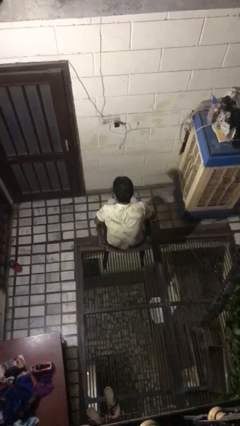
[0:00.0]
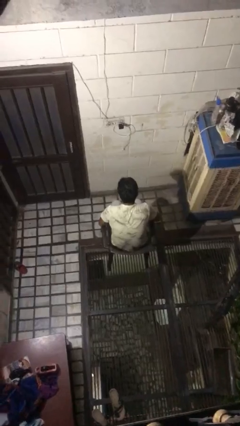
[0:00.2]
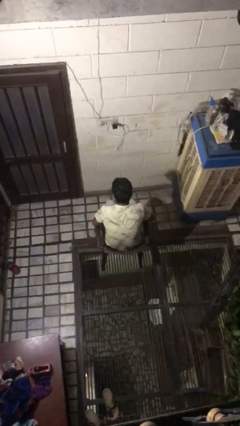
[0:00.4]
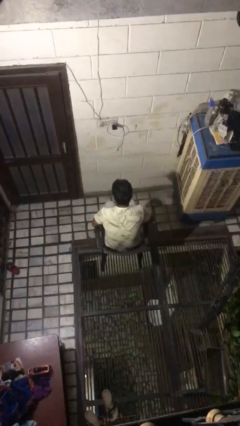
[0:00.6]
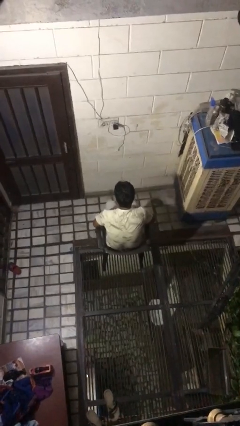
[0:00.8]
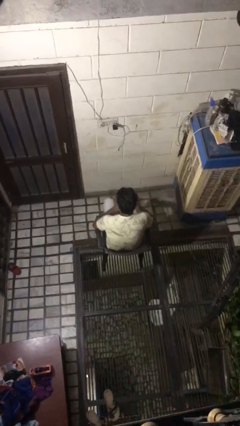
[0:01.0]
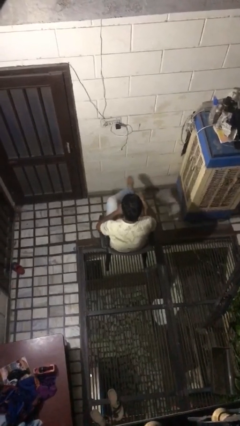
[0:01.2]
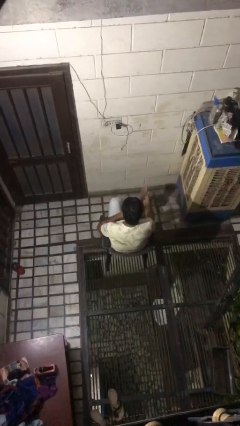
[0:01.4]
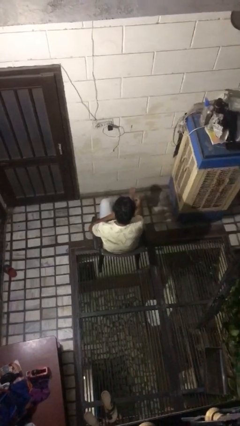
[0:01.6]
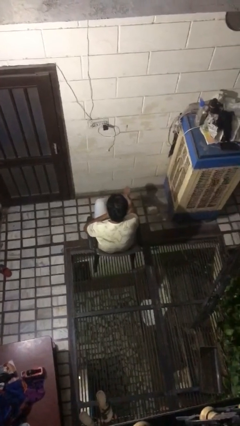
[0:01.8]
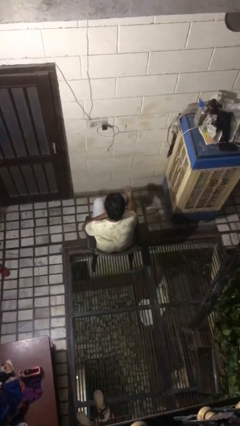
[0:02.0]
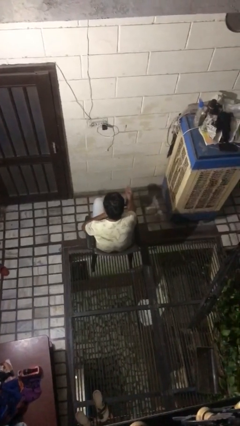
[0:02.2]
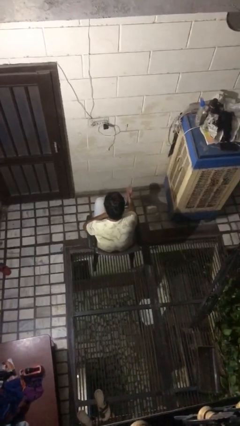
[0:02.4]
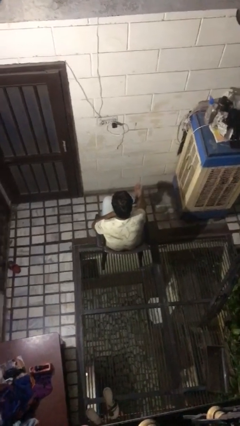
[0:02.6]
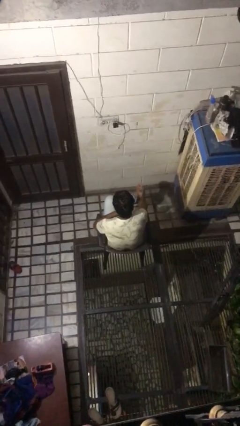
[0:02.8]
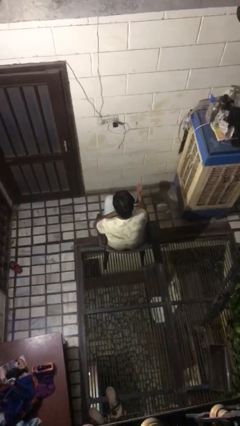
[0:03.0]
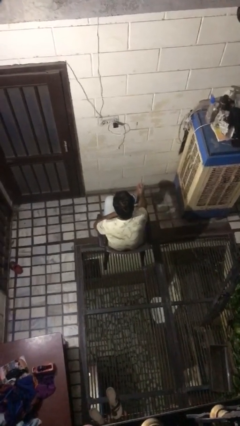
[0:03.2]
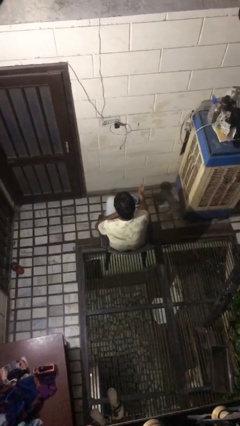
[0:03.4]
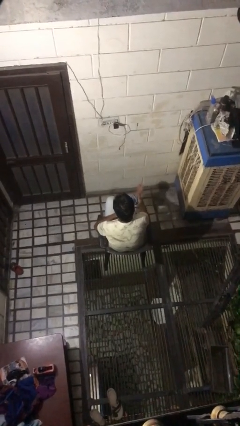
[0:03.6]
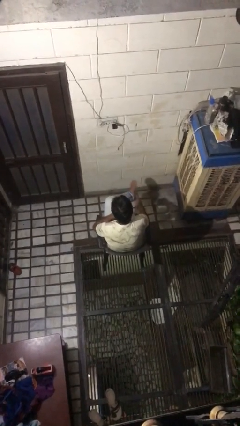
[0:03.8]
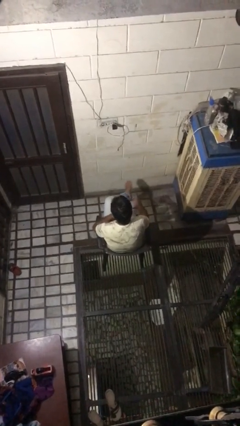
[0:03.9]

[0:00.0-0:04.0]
person rubs foot

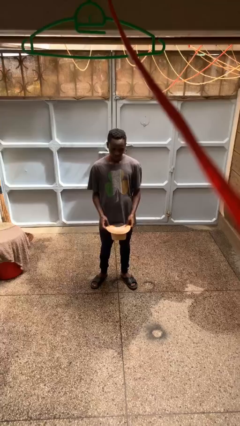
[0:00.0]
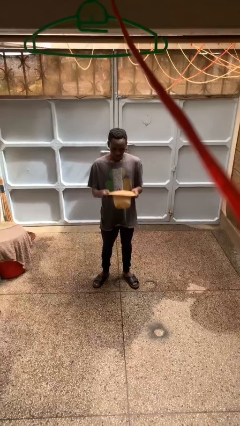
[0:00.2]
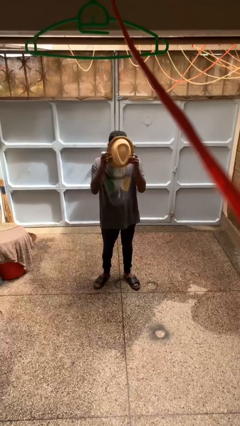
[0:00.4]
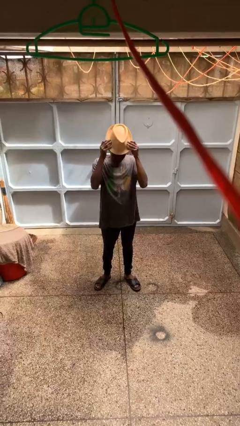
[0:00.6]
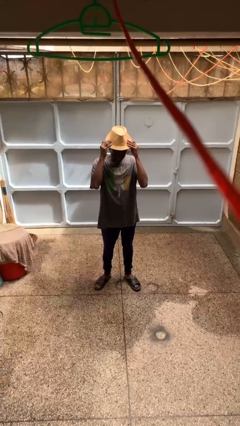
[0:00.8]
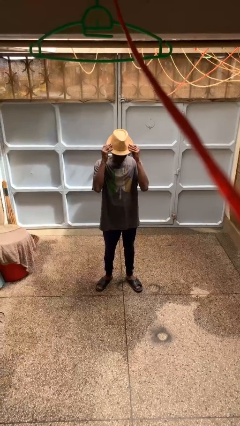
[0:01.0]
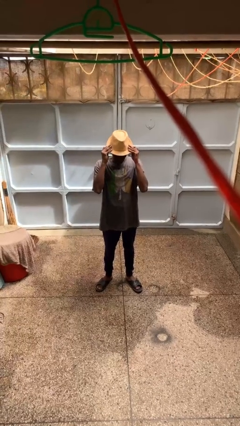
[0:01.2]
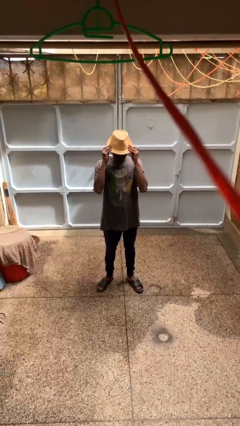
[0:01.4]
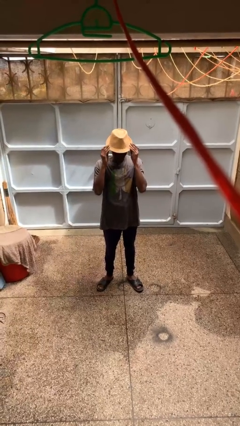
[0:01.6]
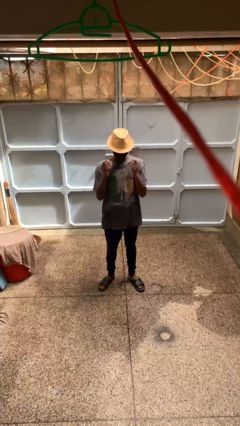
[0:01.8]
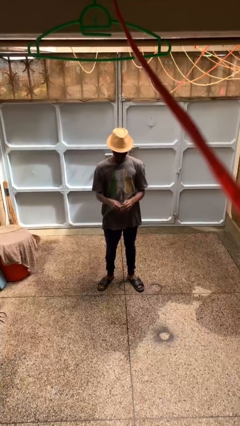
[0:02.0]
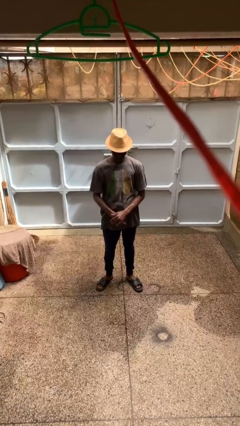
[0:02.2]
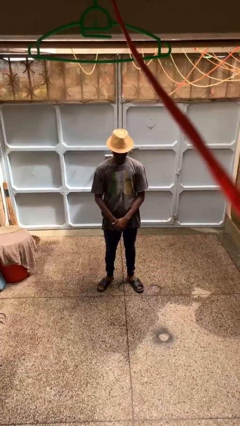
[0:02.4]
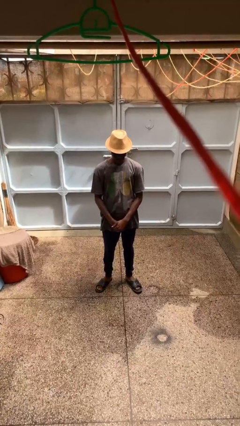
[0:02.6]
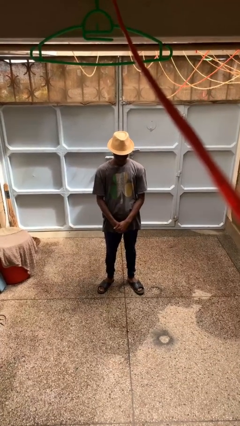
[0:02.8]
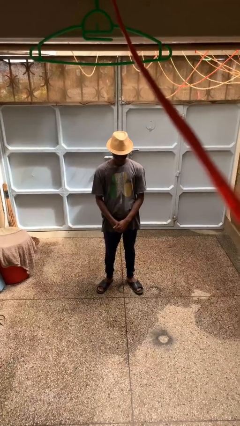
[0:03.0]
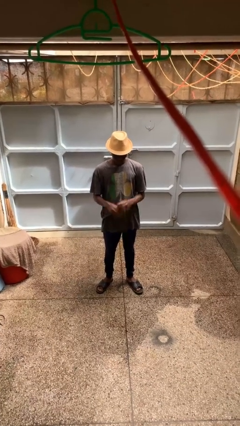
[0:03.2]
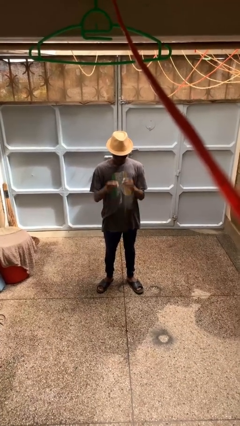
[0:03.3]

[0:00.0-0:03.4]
person puts on hat

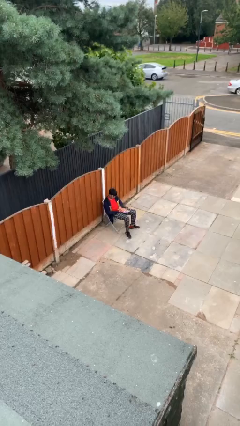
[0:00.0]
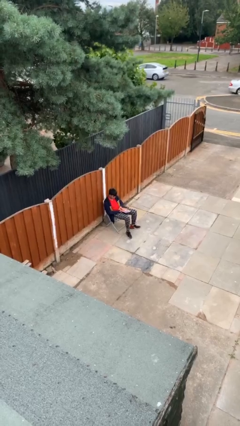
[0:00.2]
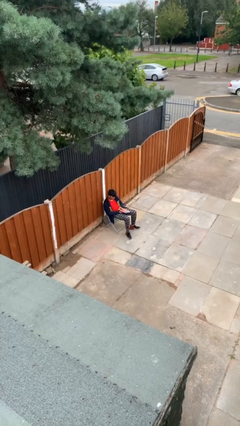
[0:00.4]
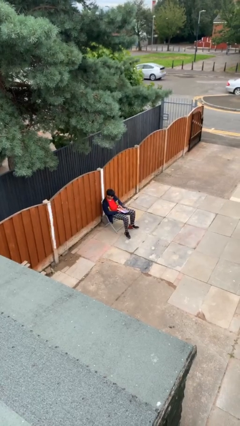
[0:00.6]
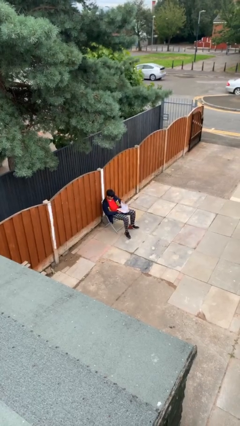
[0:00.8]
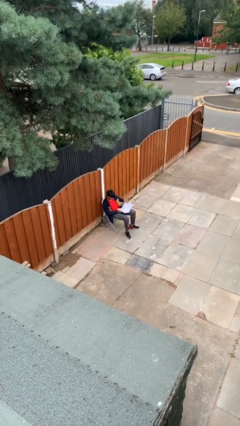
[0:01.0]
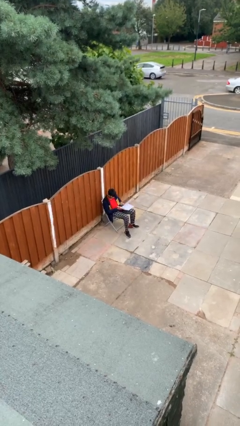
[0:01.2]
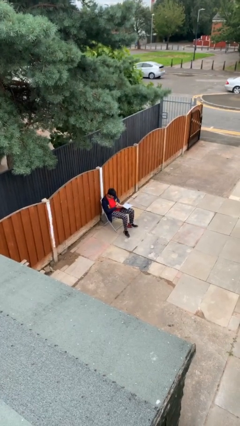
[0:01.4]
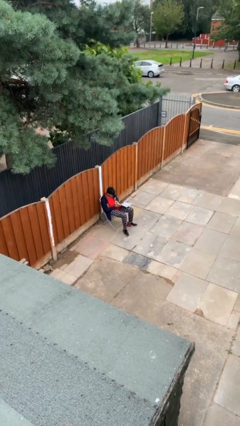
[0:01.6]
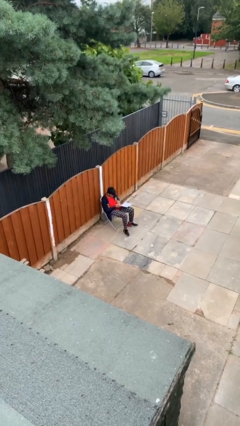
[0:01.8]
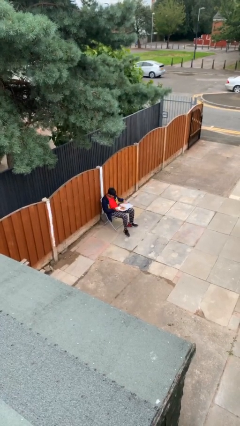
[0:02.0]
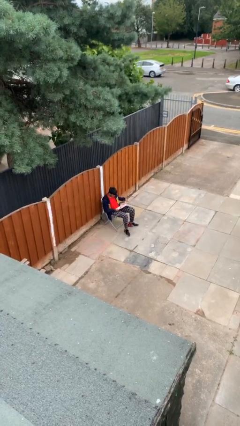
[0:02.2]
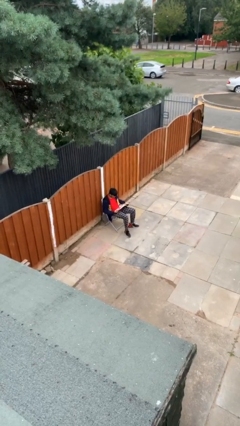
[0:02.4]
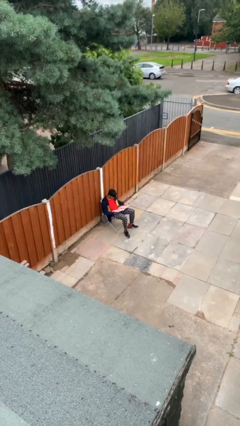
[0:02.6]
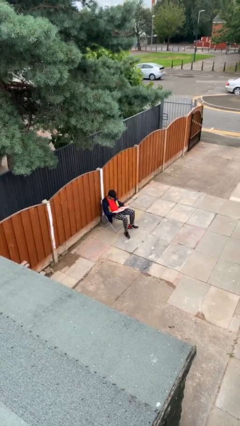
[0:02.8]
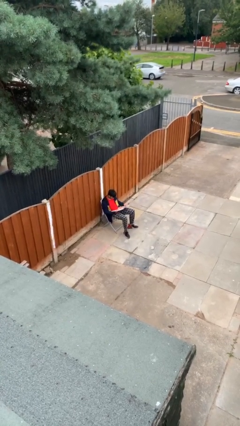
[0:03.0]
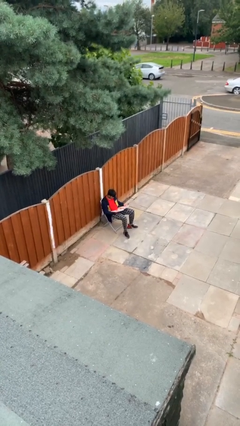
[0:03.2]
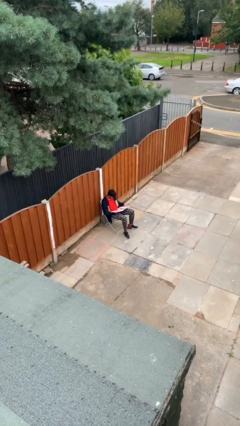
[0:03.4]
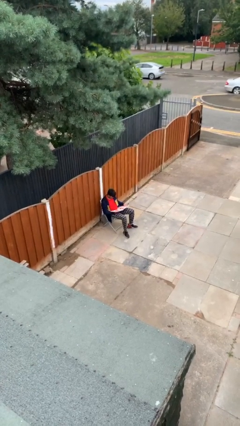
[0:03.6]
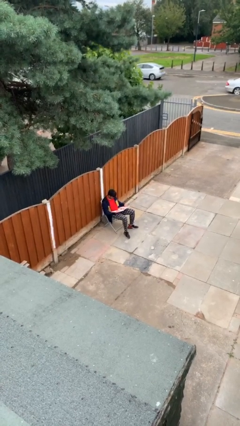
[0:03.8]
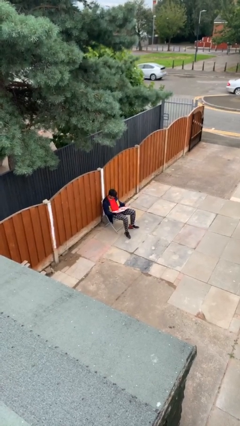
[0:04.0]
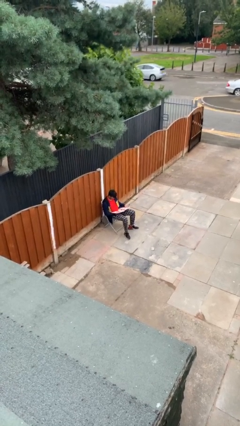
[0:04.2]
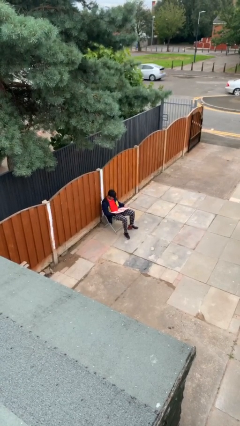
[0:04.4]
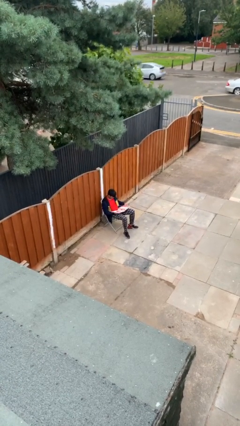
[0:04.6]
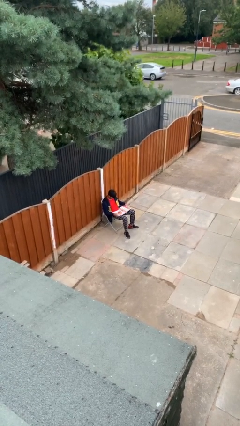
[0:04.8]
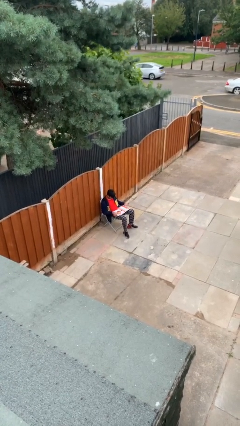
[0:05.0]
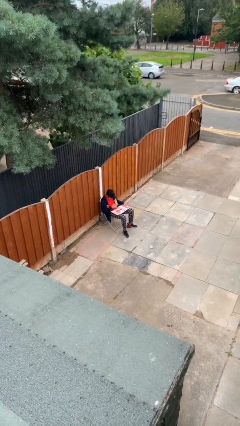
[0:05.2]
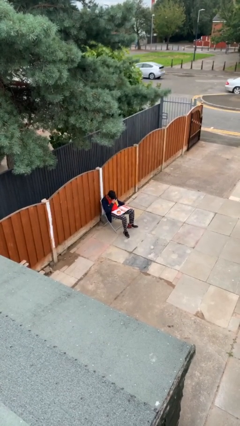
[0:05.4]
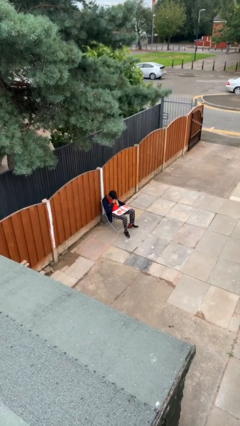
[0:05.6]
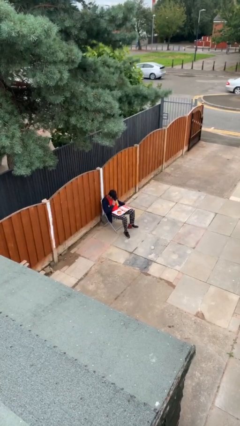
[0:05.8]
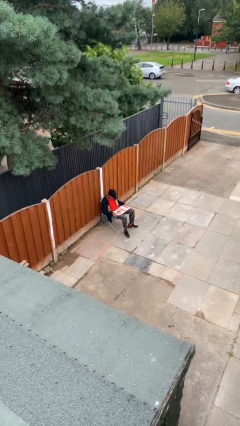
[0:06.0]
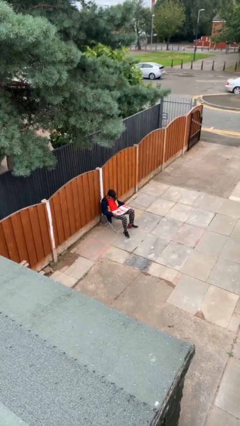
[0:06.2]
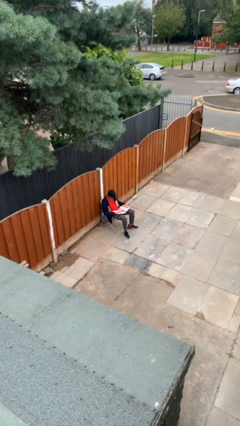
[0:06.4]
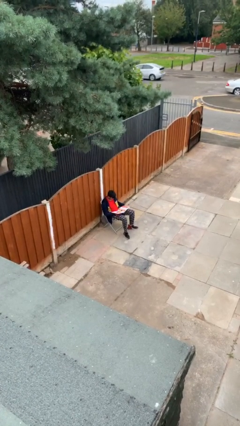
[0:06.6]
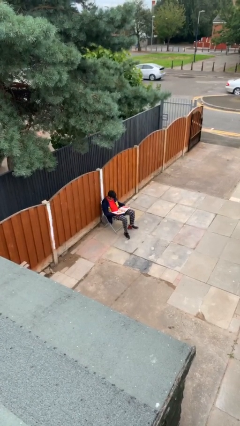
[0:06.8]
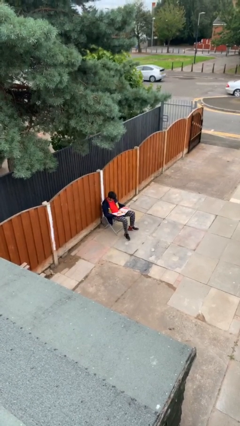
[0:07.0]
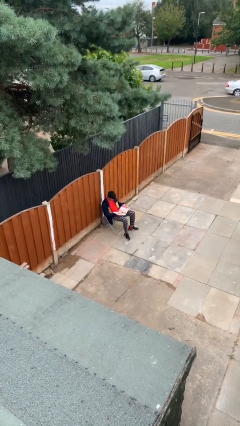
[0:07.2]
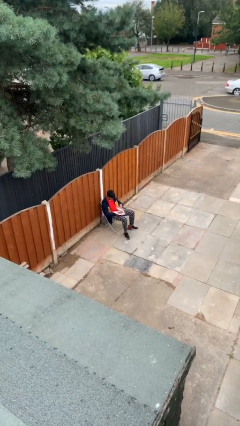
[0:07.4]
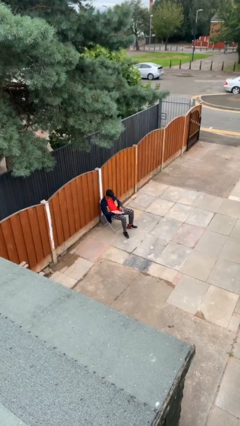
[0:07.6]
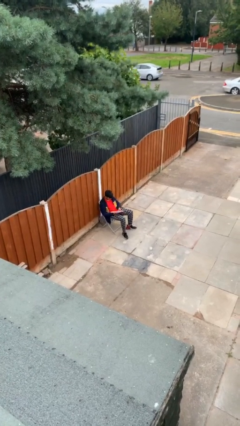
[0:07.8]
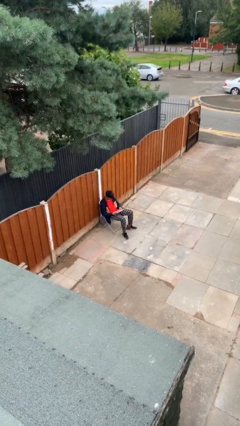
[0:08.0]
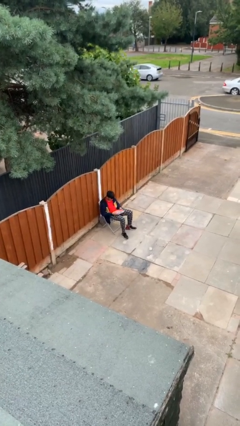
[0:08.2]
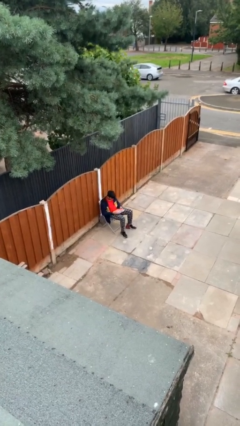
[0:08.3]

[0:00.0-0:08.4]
person reads document

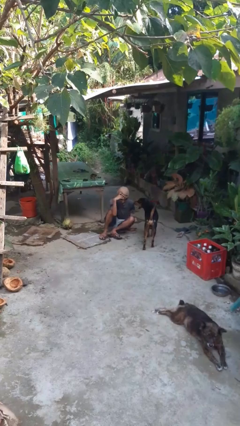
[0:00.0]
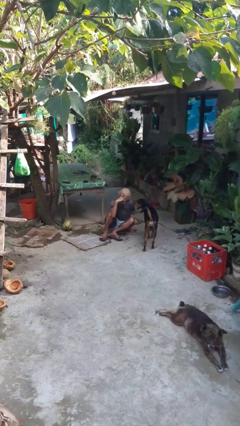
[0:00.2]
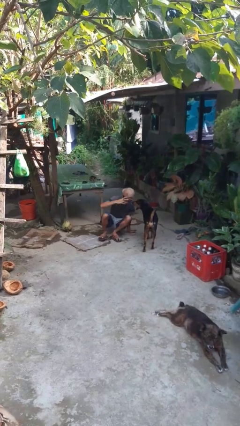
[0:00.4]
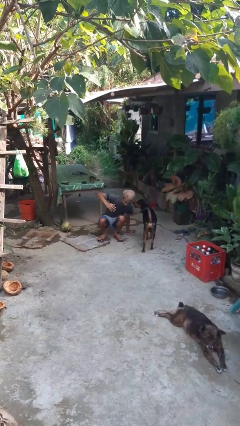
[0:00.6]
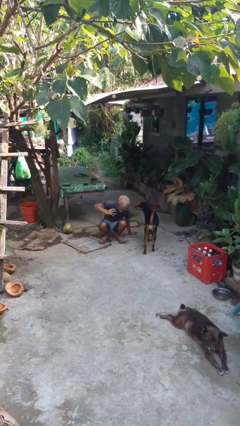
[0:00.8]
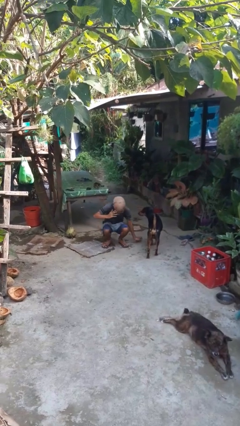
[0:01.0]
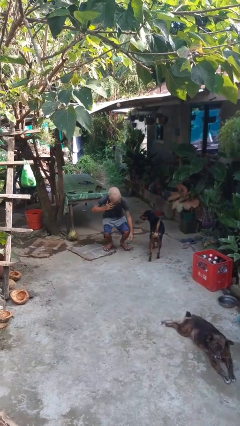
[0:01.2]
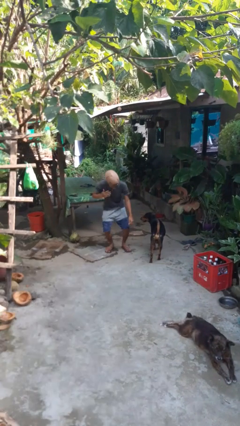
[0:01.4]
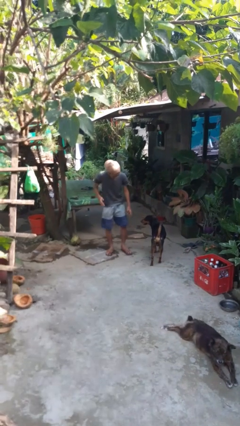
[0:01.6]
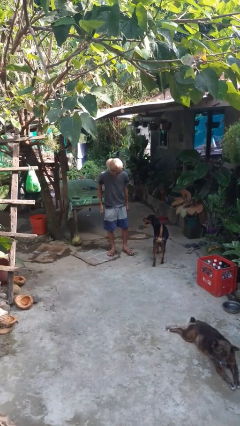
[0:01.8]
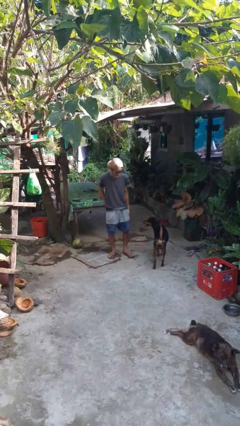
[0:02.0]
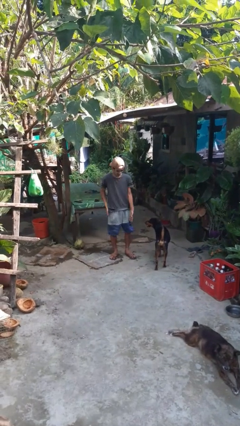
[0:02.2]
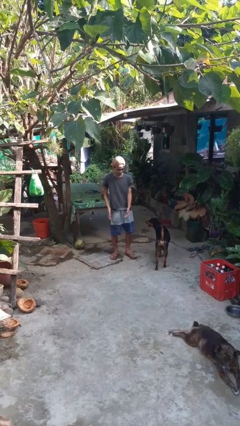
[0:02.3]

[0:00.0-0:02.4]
person stands up from floor
